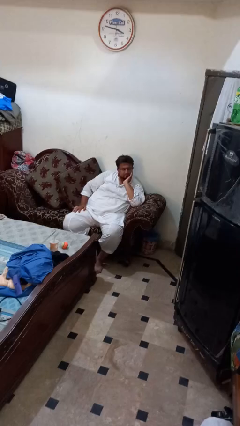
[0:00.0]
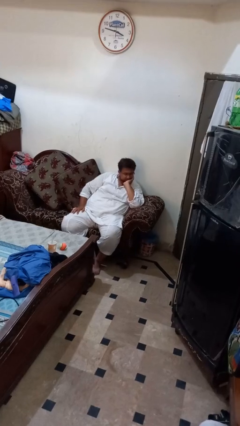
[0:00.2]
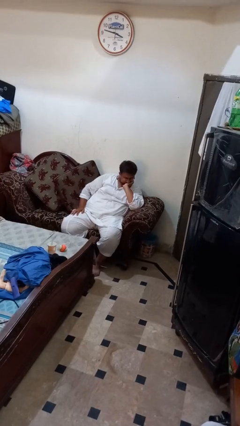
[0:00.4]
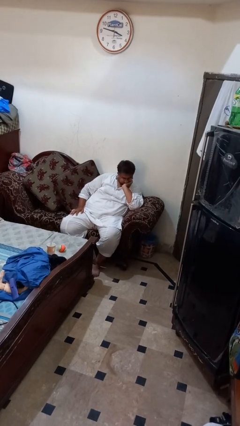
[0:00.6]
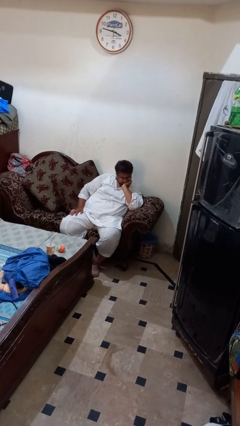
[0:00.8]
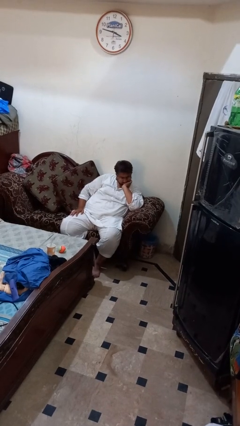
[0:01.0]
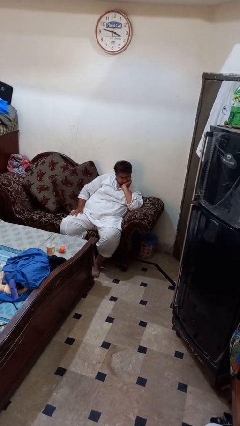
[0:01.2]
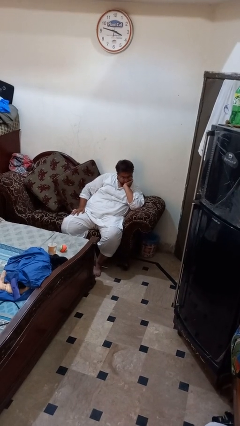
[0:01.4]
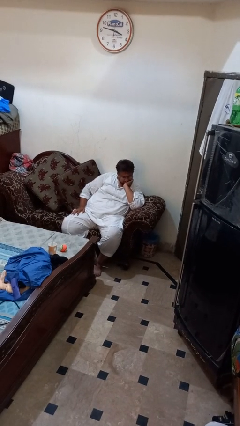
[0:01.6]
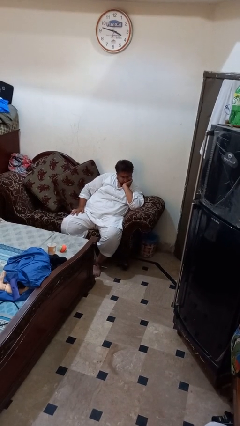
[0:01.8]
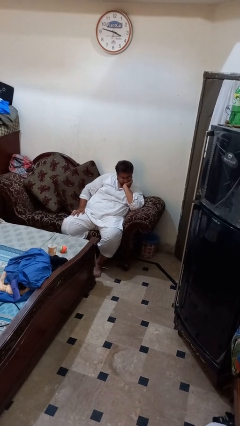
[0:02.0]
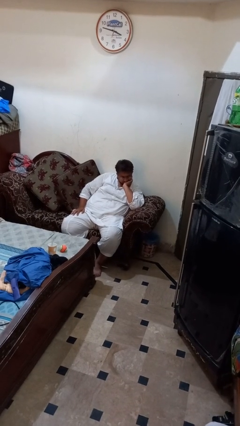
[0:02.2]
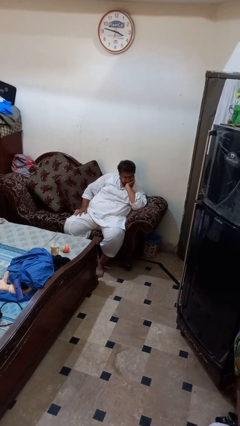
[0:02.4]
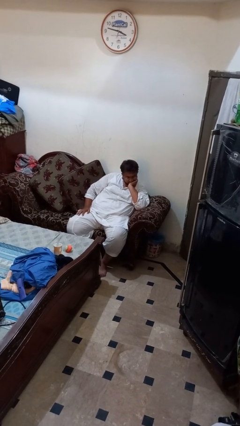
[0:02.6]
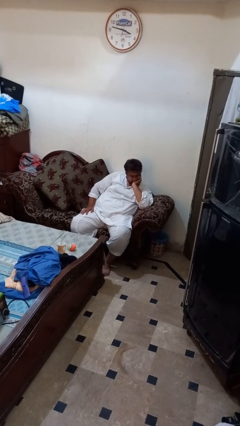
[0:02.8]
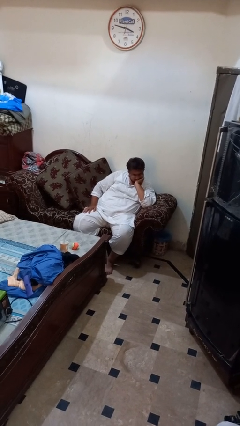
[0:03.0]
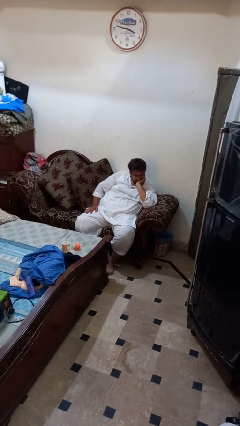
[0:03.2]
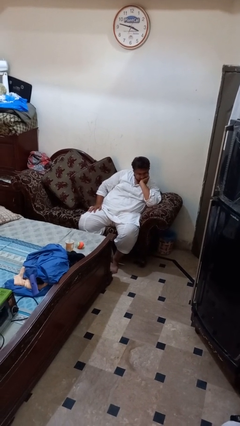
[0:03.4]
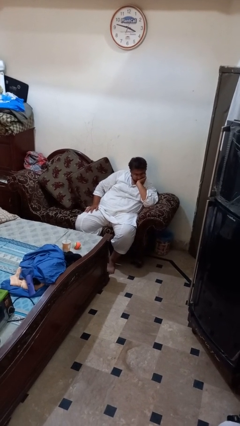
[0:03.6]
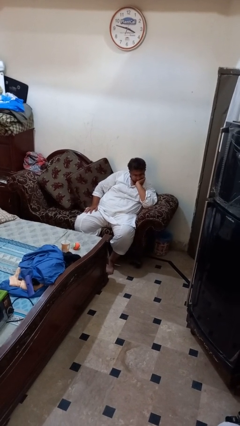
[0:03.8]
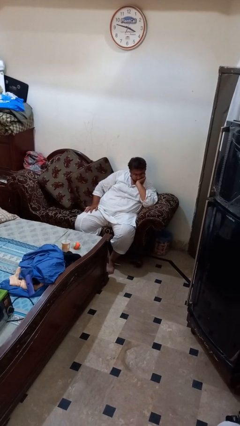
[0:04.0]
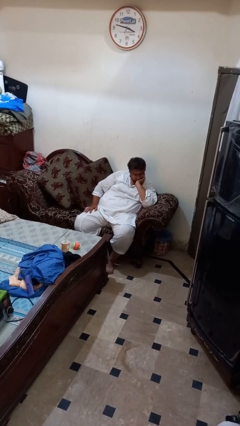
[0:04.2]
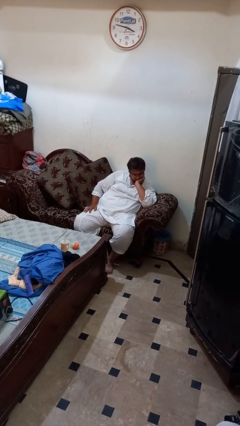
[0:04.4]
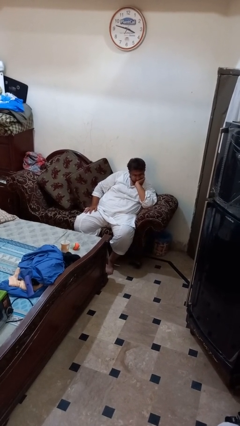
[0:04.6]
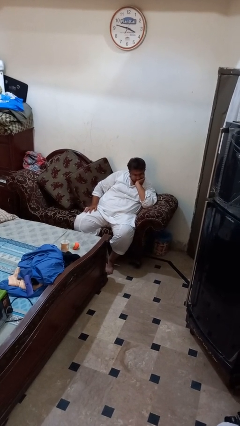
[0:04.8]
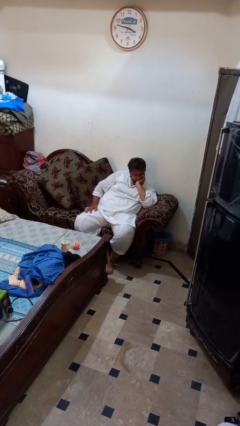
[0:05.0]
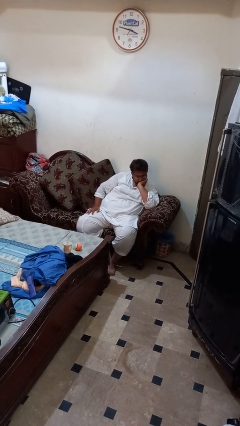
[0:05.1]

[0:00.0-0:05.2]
person strokes chin

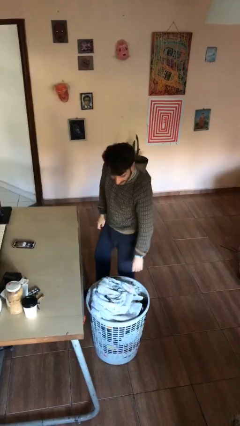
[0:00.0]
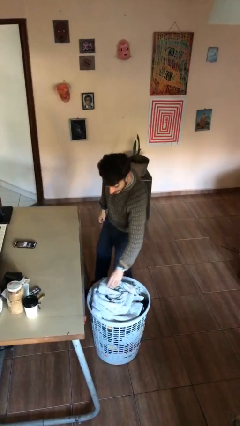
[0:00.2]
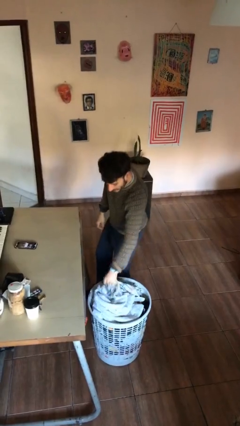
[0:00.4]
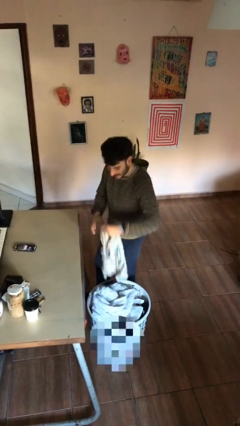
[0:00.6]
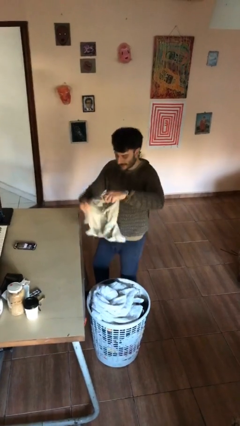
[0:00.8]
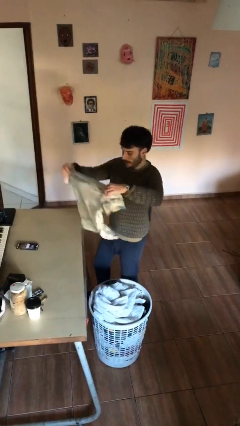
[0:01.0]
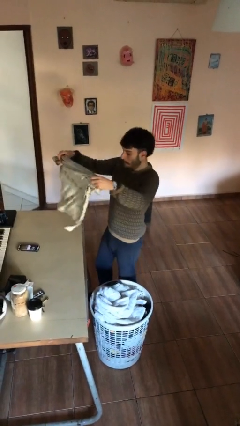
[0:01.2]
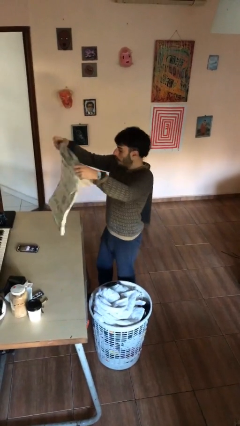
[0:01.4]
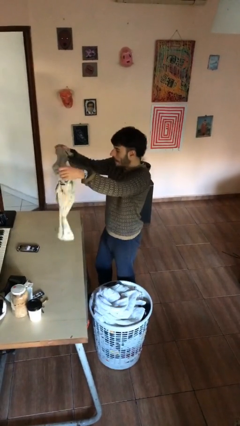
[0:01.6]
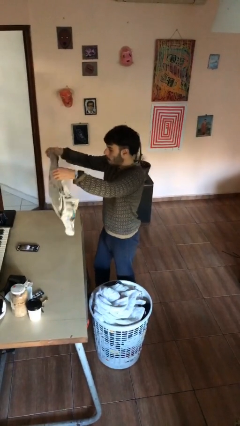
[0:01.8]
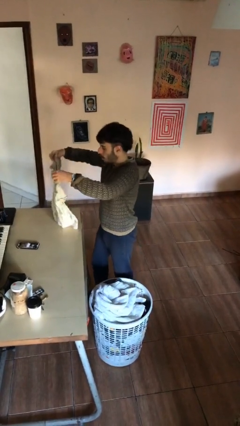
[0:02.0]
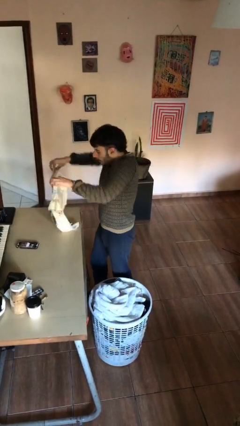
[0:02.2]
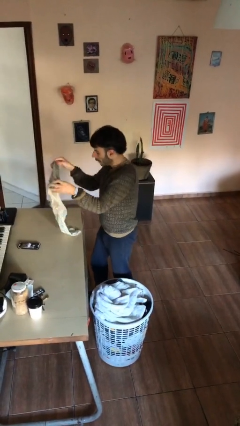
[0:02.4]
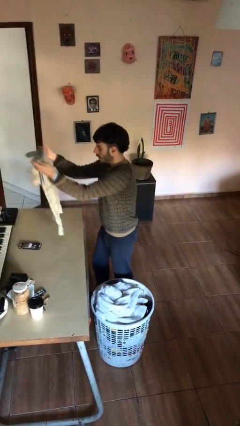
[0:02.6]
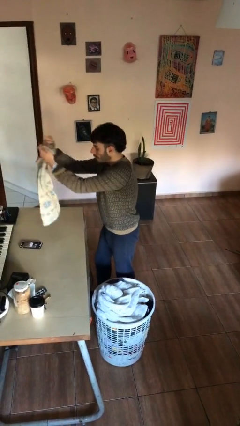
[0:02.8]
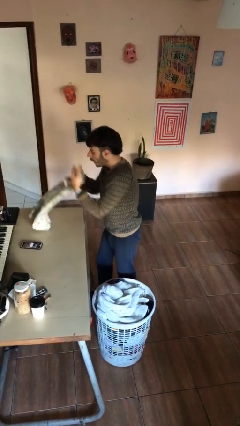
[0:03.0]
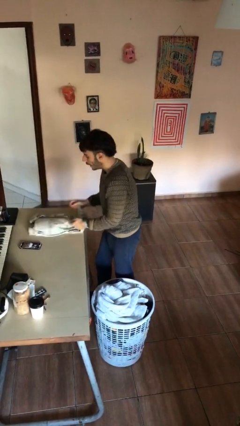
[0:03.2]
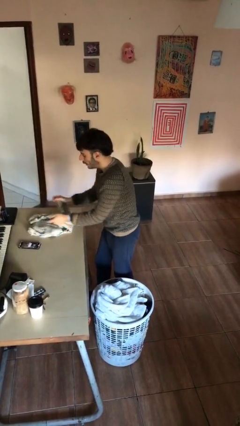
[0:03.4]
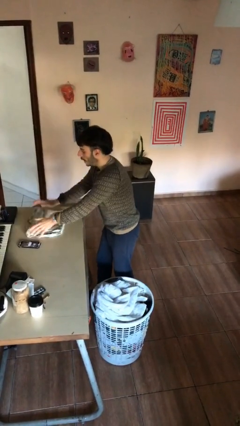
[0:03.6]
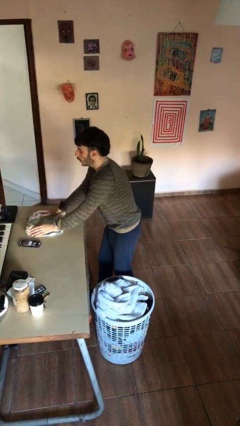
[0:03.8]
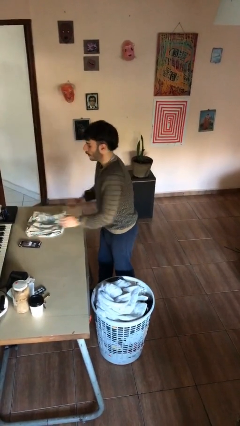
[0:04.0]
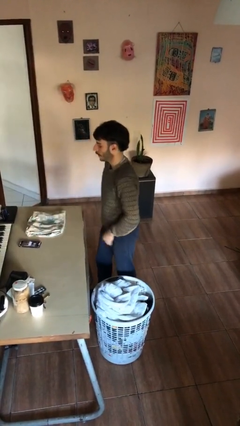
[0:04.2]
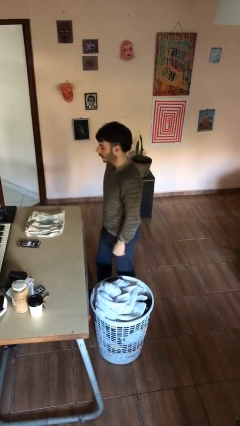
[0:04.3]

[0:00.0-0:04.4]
person folds shirt

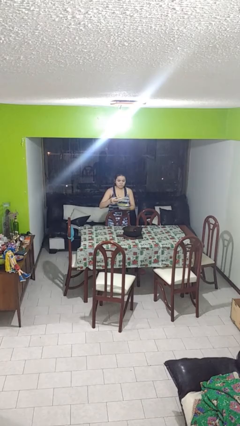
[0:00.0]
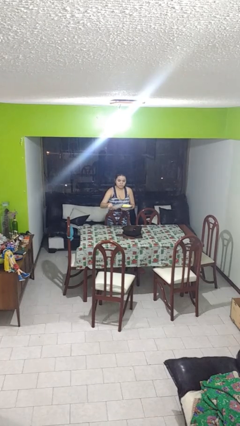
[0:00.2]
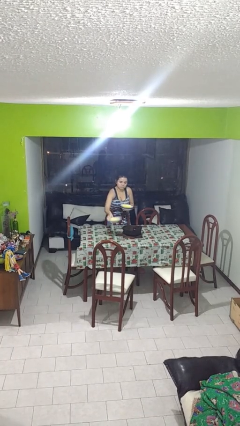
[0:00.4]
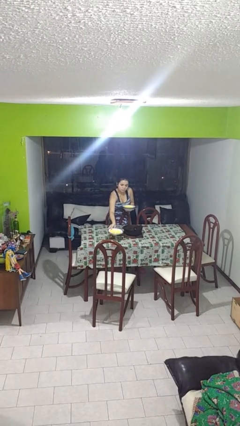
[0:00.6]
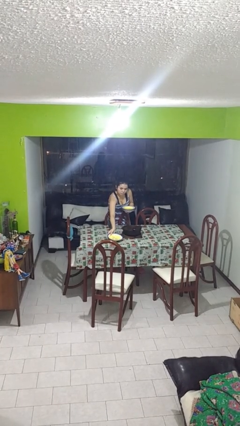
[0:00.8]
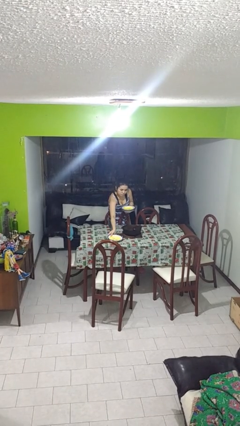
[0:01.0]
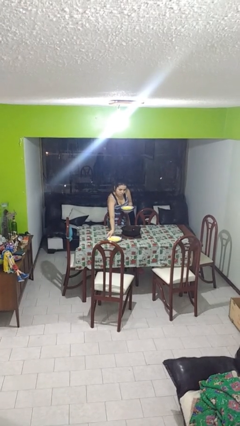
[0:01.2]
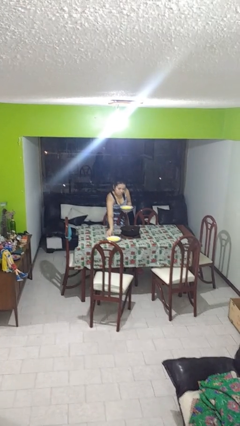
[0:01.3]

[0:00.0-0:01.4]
person sets table

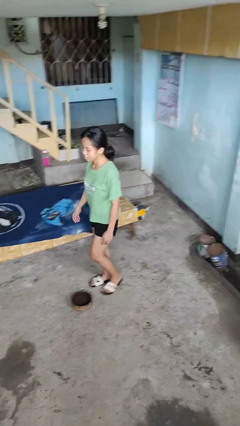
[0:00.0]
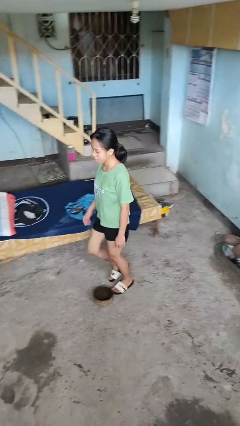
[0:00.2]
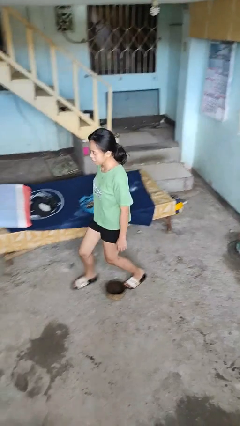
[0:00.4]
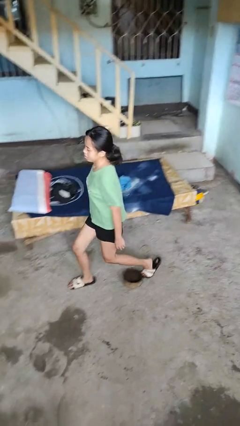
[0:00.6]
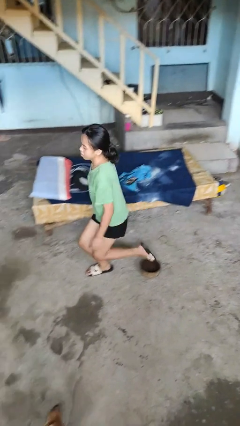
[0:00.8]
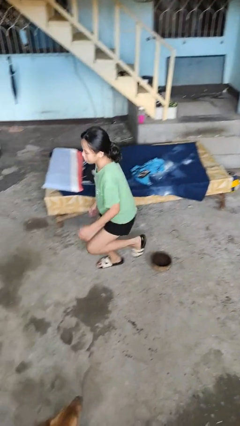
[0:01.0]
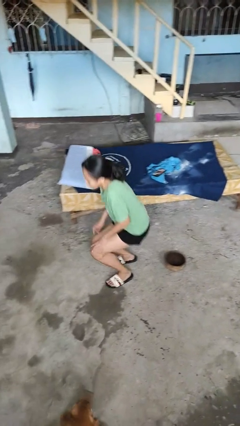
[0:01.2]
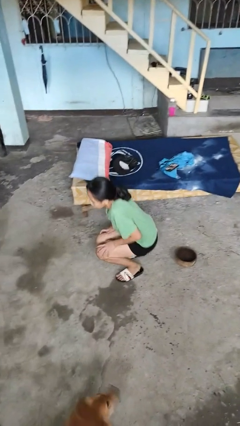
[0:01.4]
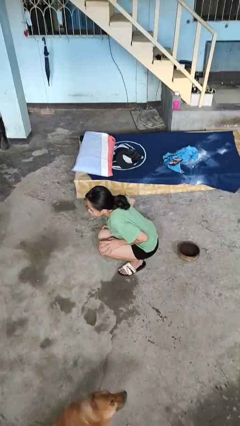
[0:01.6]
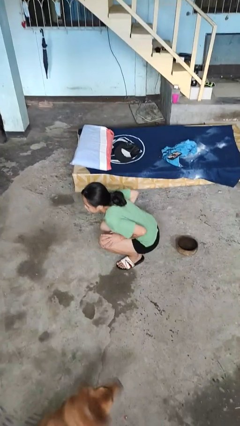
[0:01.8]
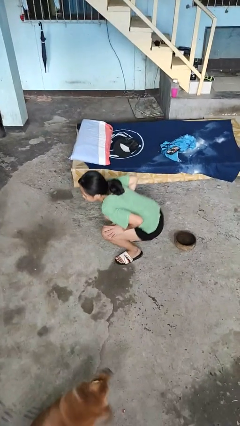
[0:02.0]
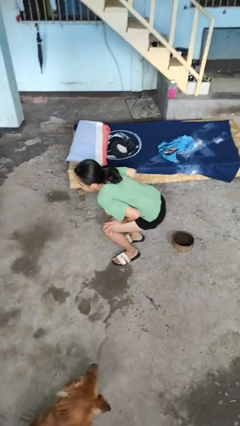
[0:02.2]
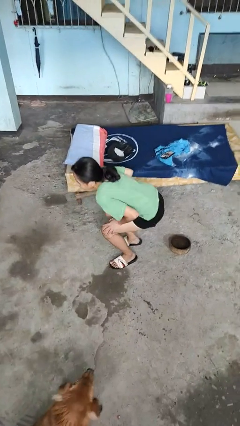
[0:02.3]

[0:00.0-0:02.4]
person trips on object on floor

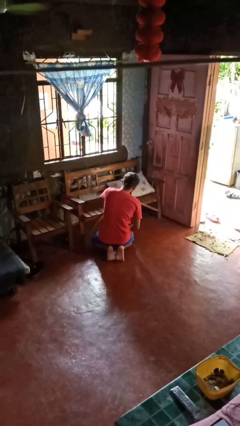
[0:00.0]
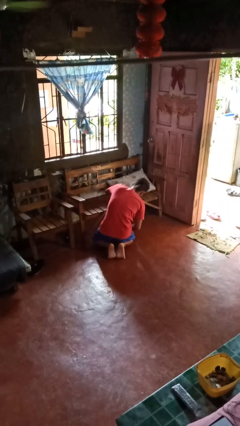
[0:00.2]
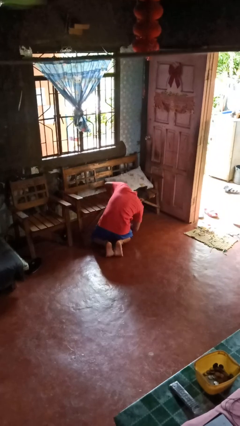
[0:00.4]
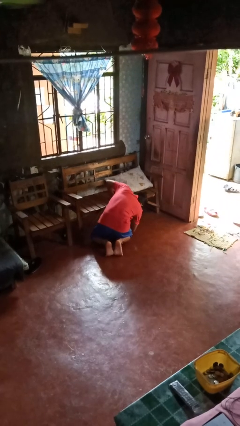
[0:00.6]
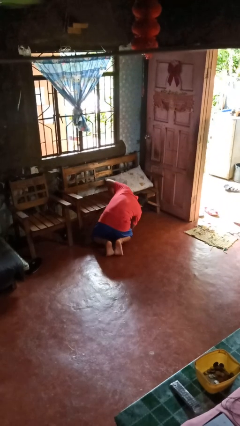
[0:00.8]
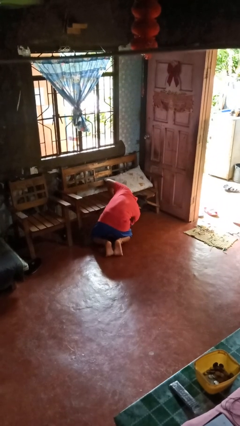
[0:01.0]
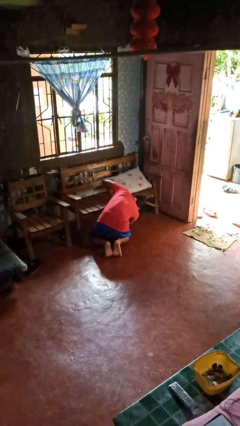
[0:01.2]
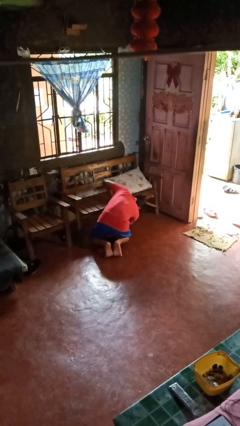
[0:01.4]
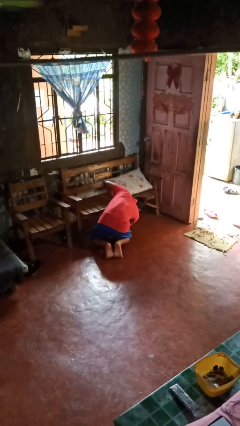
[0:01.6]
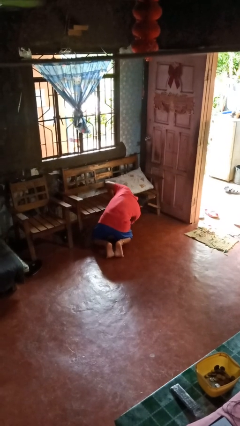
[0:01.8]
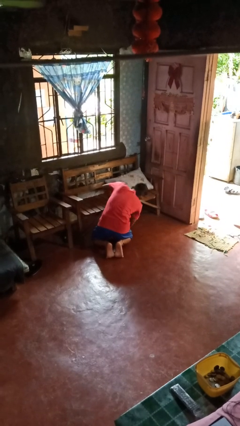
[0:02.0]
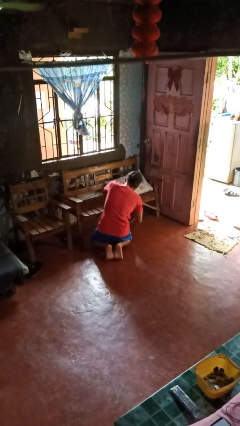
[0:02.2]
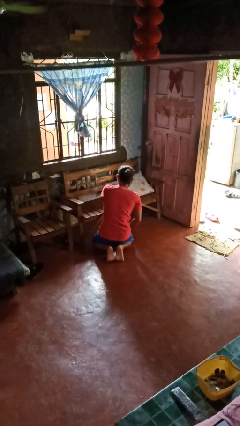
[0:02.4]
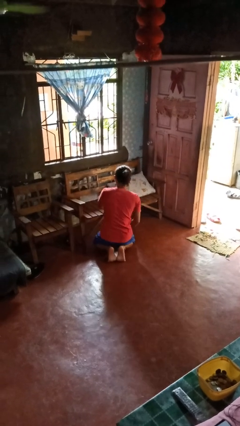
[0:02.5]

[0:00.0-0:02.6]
person searches in couch

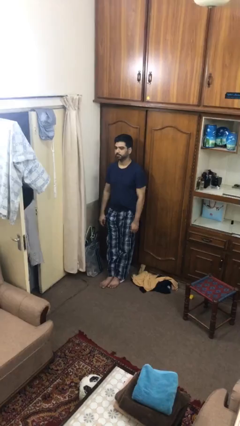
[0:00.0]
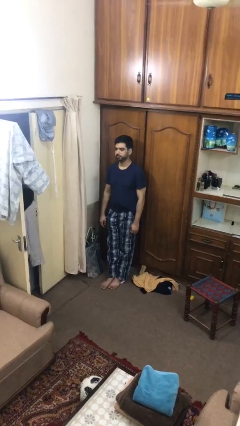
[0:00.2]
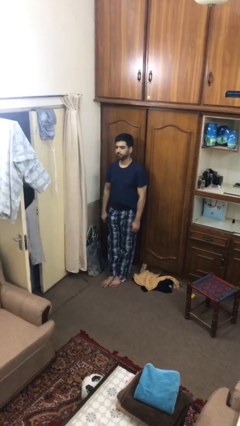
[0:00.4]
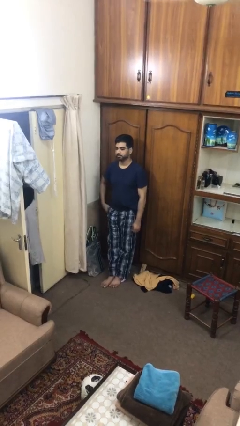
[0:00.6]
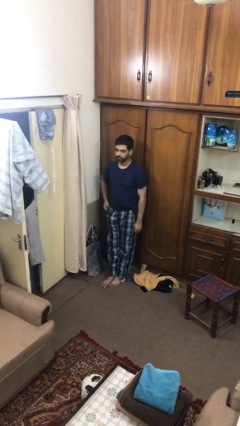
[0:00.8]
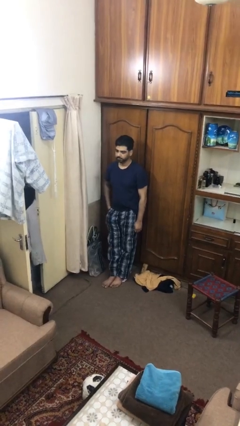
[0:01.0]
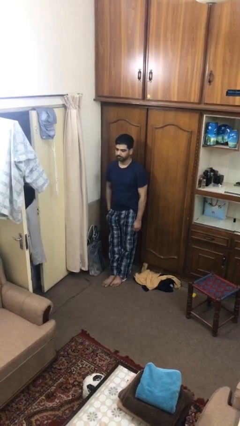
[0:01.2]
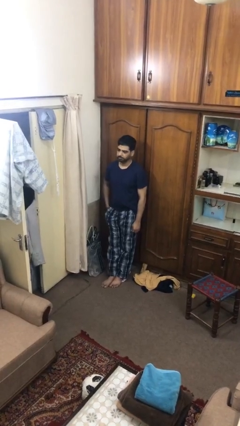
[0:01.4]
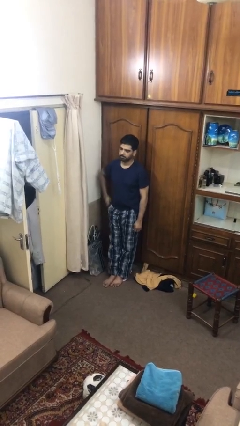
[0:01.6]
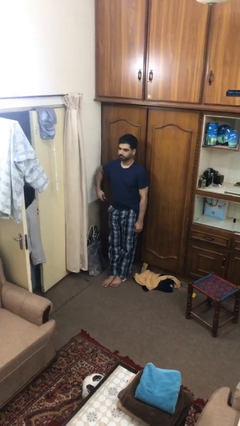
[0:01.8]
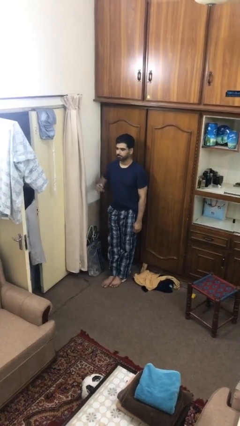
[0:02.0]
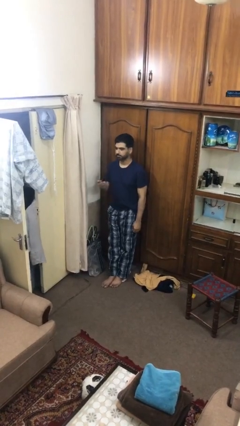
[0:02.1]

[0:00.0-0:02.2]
person takes phone from pocket
